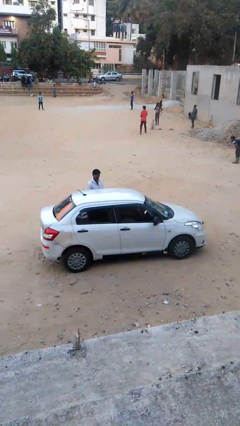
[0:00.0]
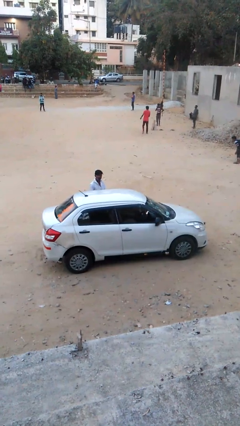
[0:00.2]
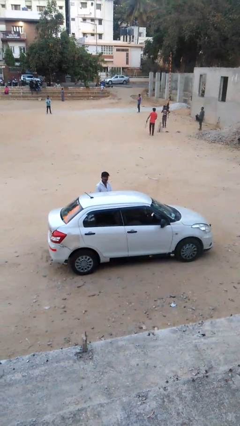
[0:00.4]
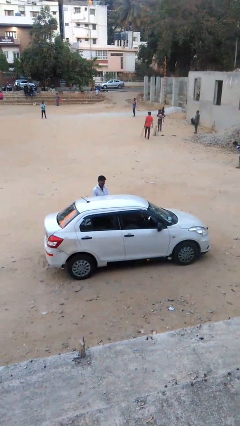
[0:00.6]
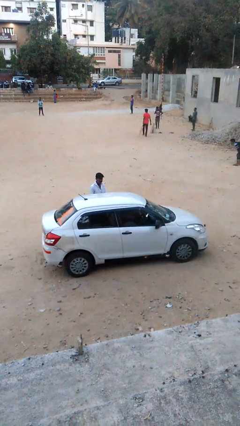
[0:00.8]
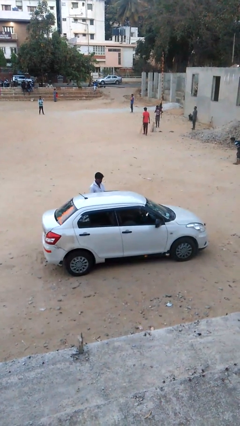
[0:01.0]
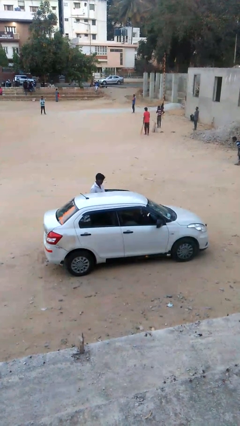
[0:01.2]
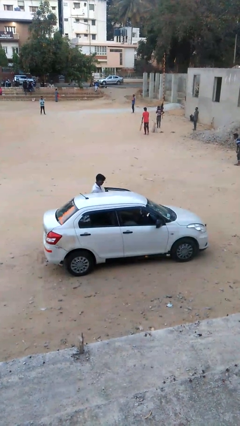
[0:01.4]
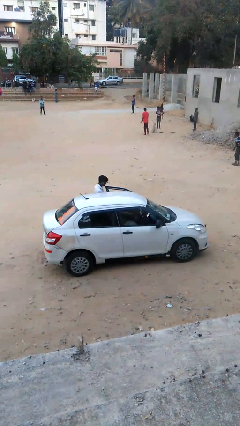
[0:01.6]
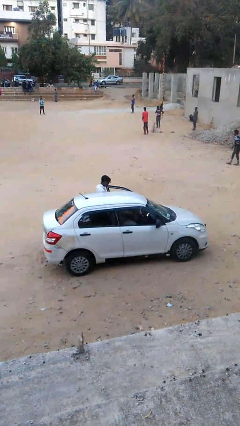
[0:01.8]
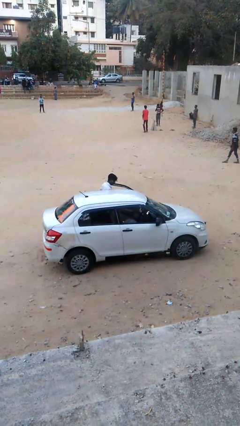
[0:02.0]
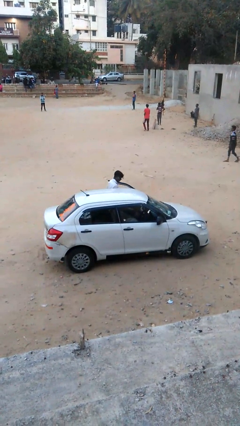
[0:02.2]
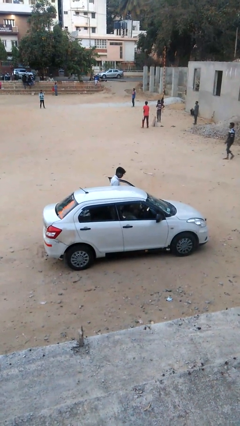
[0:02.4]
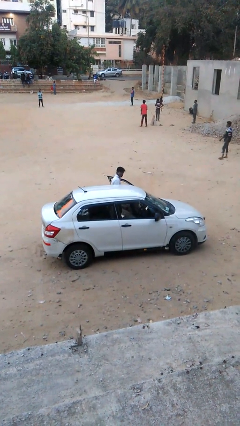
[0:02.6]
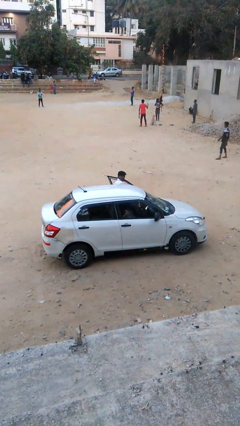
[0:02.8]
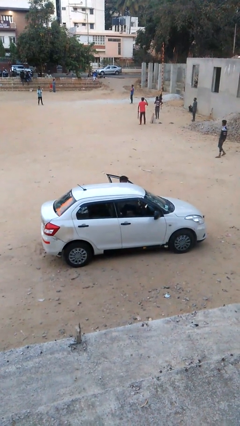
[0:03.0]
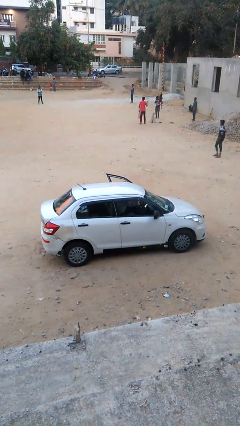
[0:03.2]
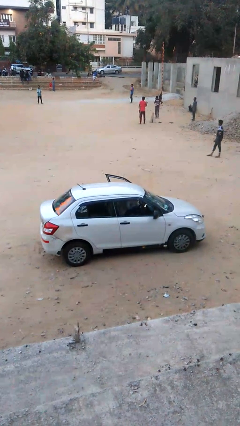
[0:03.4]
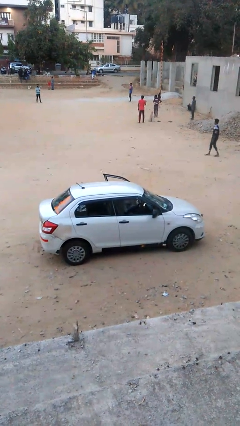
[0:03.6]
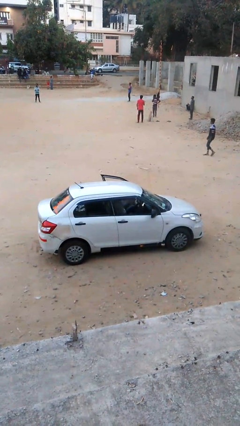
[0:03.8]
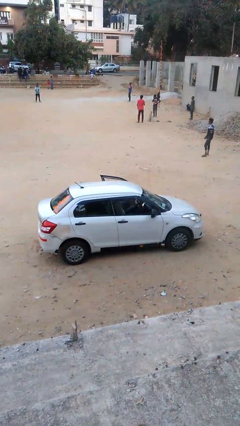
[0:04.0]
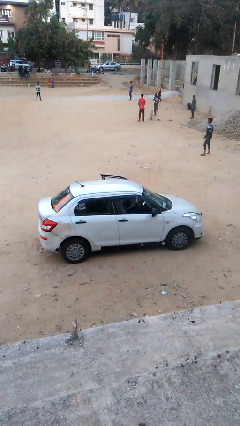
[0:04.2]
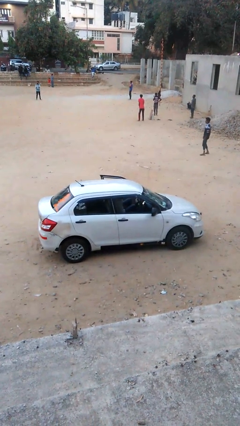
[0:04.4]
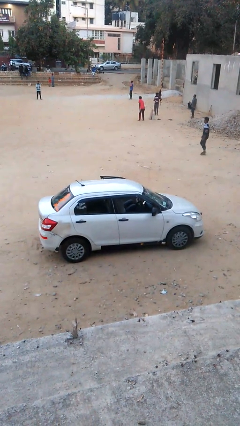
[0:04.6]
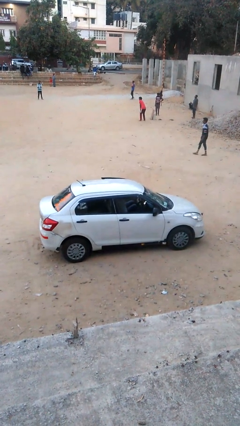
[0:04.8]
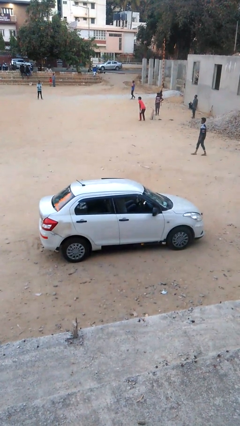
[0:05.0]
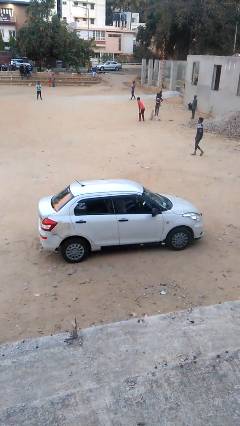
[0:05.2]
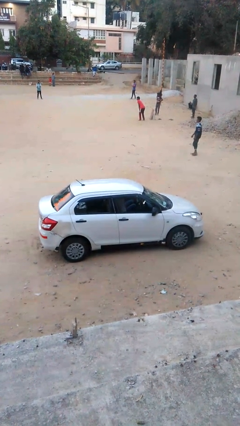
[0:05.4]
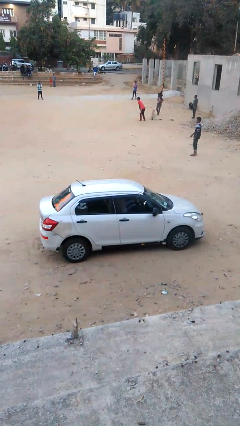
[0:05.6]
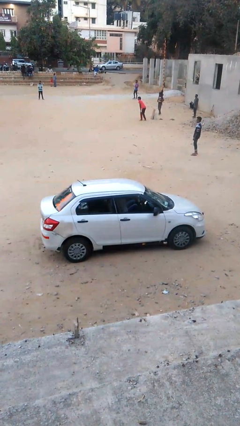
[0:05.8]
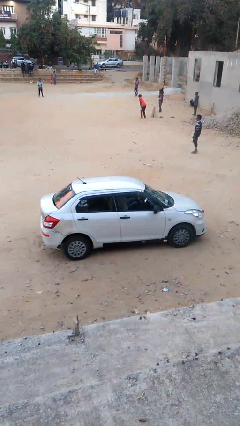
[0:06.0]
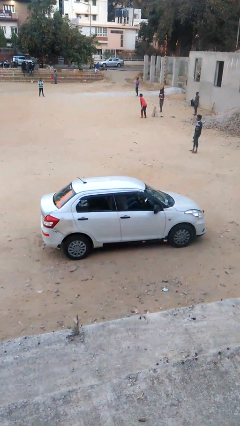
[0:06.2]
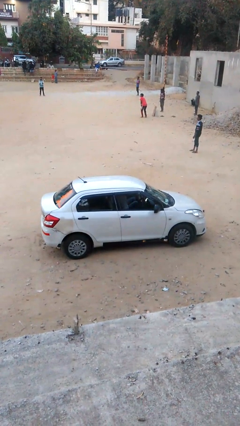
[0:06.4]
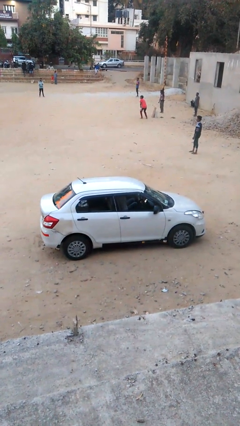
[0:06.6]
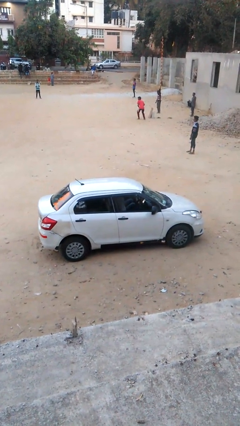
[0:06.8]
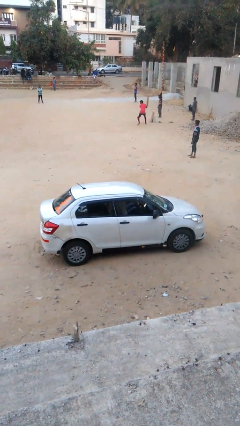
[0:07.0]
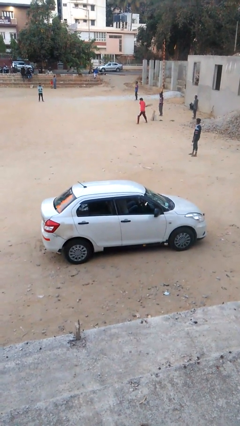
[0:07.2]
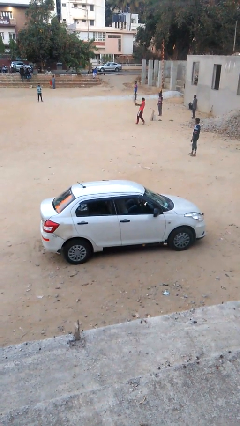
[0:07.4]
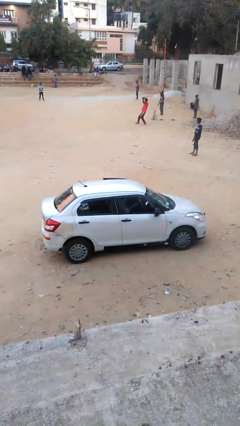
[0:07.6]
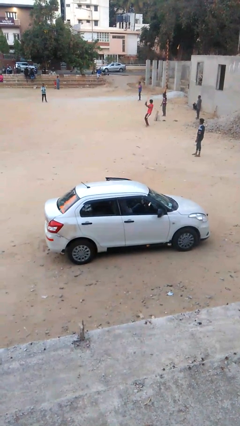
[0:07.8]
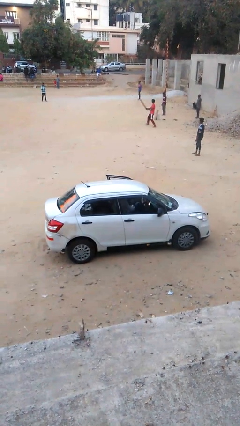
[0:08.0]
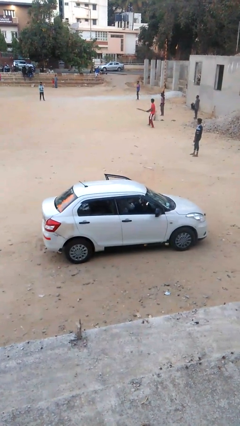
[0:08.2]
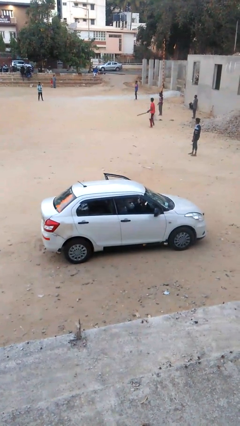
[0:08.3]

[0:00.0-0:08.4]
car picks up person

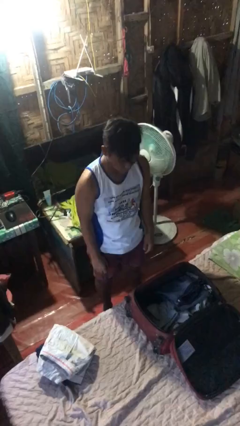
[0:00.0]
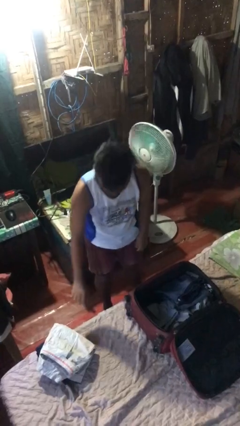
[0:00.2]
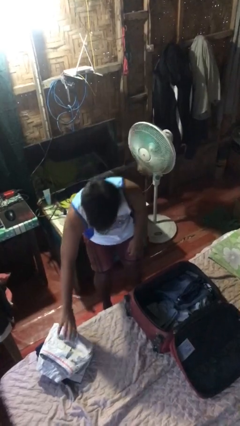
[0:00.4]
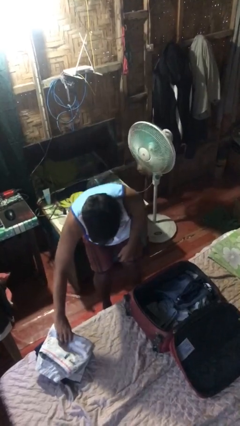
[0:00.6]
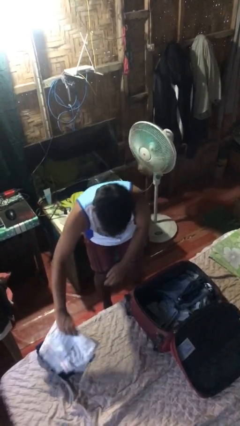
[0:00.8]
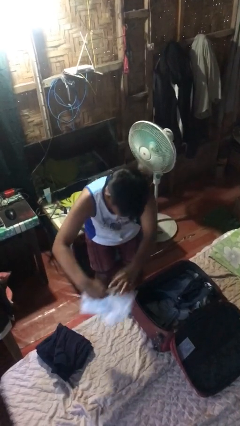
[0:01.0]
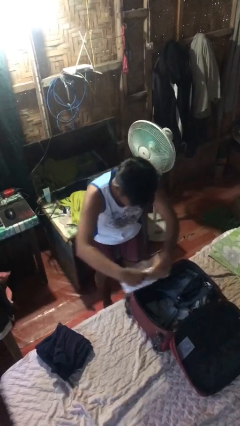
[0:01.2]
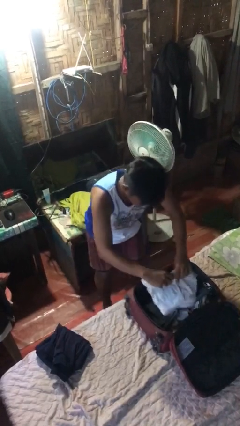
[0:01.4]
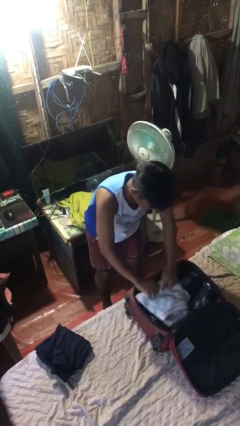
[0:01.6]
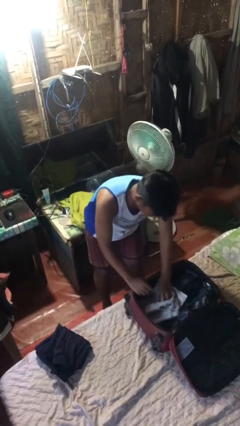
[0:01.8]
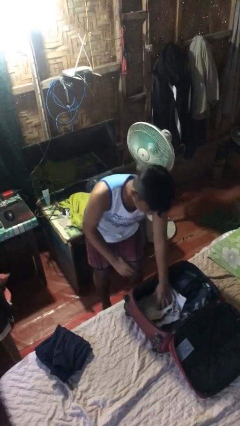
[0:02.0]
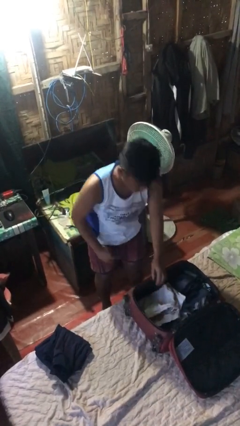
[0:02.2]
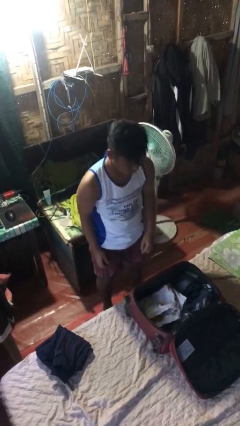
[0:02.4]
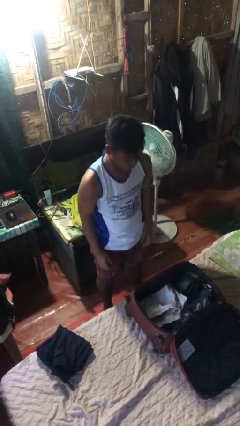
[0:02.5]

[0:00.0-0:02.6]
person loads clothes into suitcase

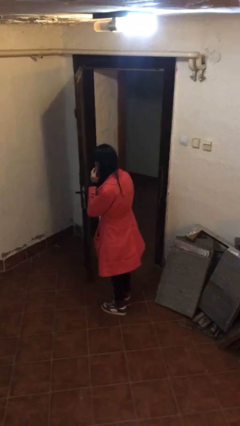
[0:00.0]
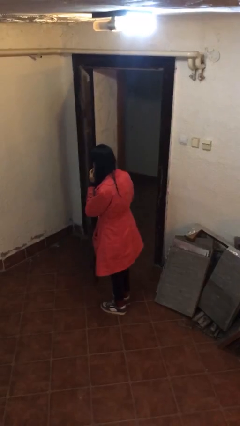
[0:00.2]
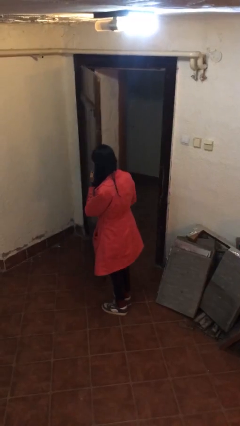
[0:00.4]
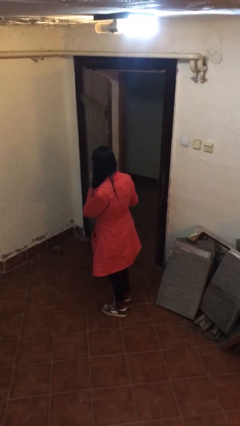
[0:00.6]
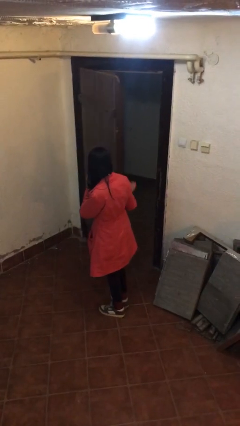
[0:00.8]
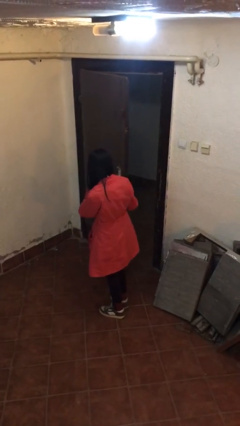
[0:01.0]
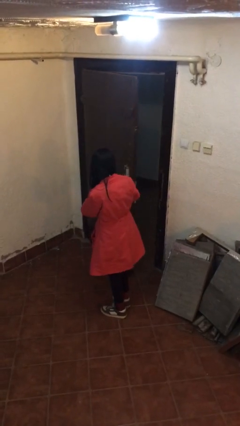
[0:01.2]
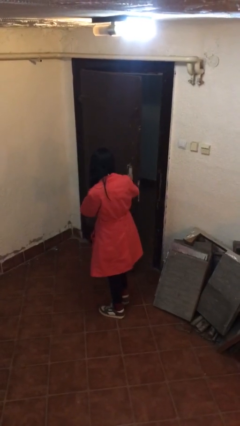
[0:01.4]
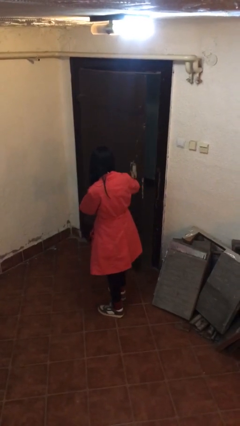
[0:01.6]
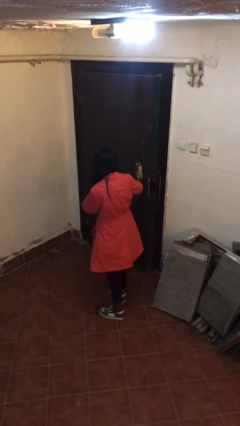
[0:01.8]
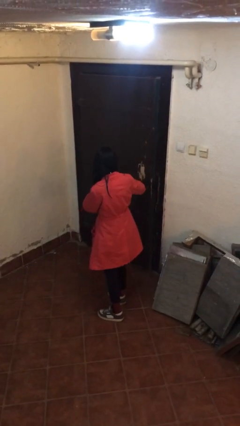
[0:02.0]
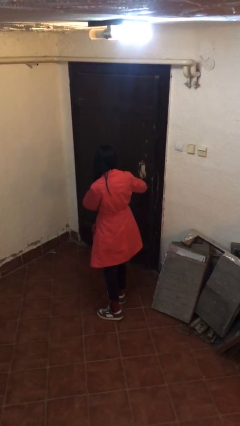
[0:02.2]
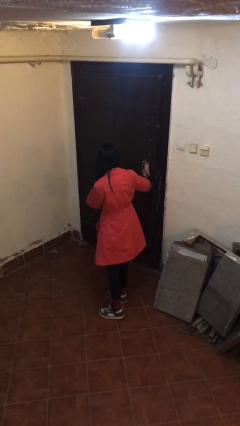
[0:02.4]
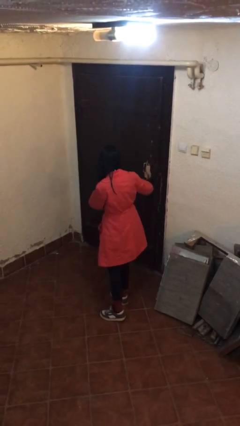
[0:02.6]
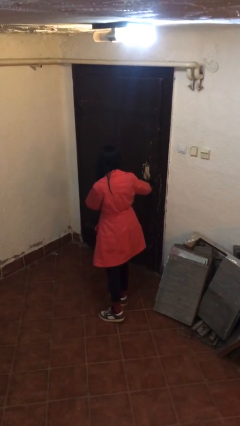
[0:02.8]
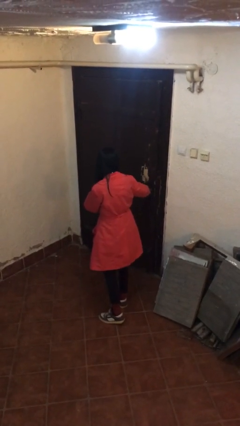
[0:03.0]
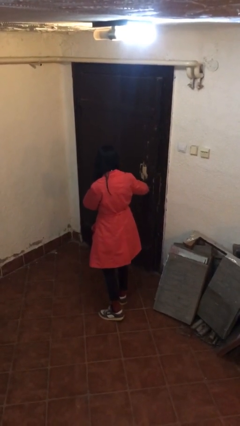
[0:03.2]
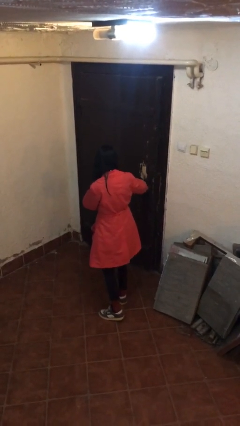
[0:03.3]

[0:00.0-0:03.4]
person closes facility door

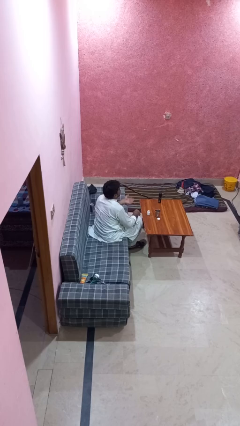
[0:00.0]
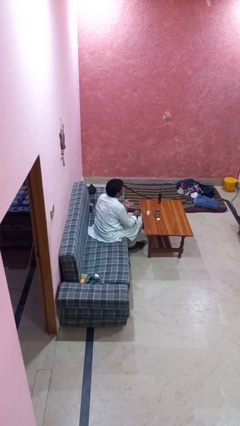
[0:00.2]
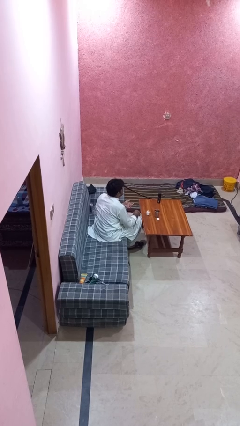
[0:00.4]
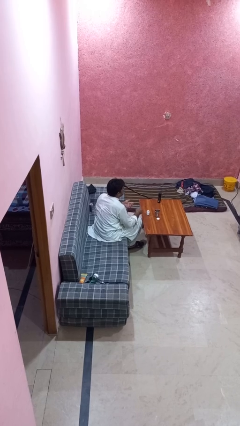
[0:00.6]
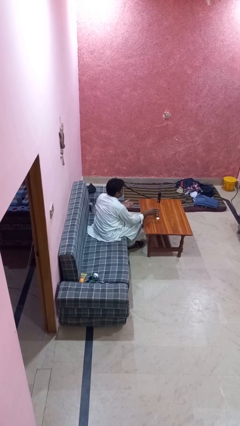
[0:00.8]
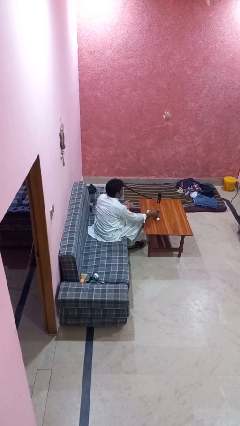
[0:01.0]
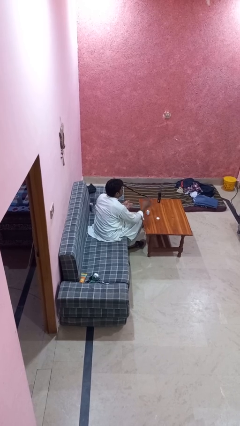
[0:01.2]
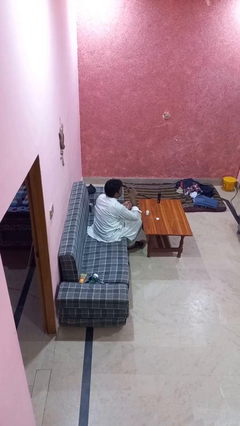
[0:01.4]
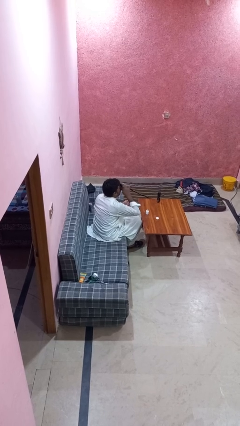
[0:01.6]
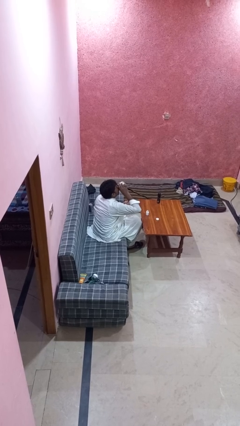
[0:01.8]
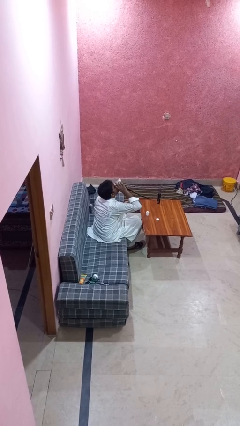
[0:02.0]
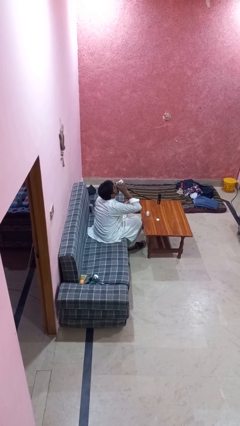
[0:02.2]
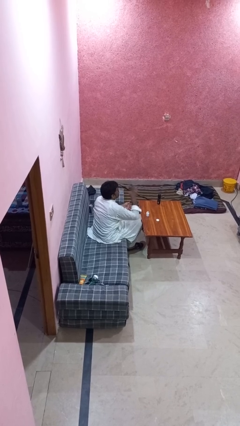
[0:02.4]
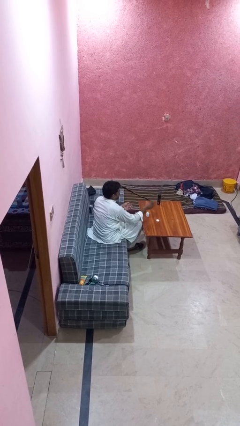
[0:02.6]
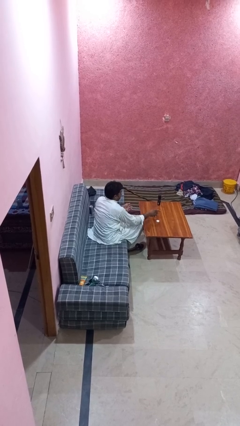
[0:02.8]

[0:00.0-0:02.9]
person drinks from cup

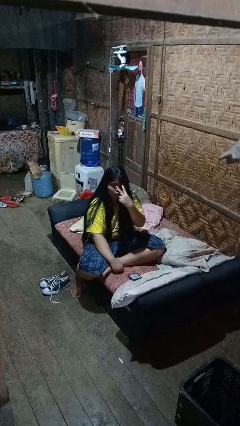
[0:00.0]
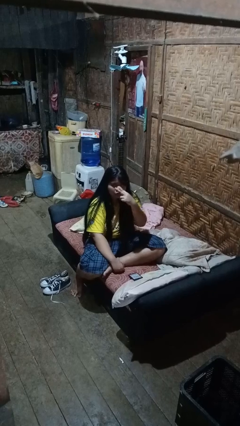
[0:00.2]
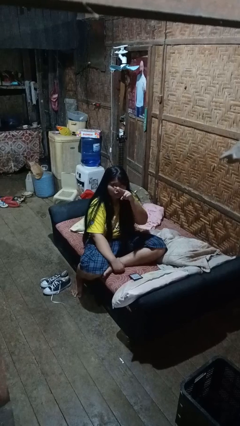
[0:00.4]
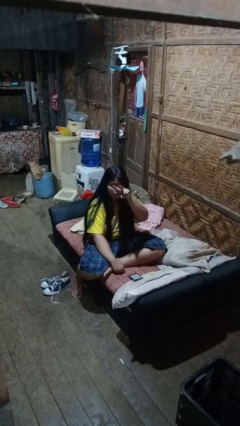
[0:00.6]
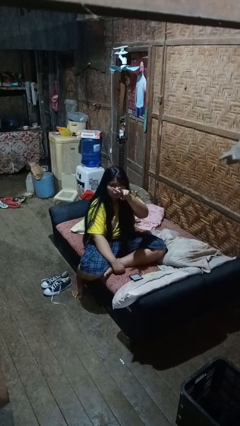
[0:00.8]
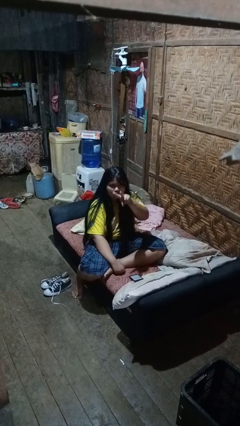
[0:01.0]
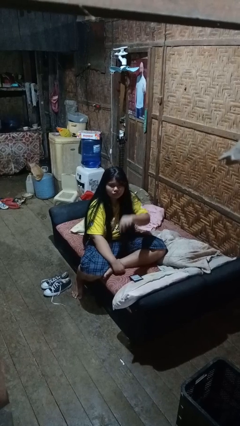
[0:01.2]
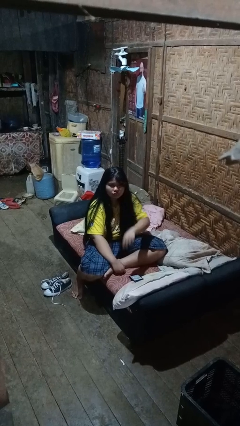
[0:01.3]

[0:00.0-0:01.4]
person gestures watch closely
